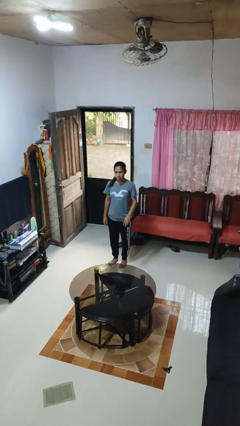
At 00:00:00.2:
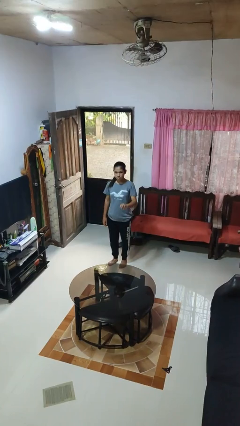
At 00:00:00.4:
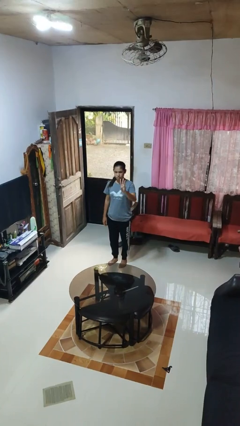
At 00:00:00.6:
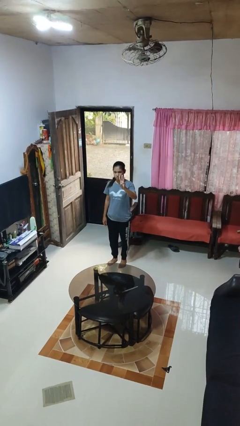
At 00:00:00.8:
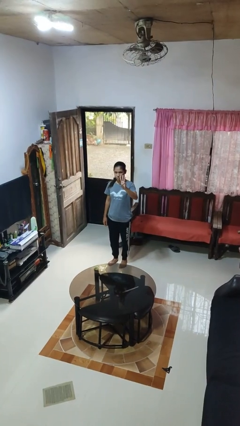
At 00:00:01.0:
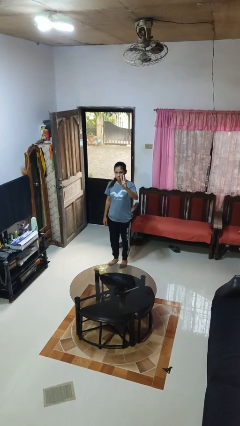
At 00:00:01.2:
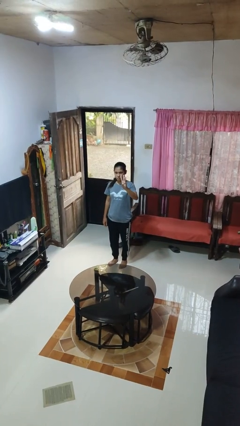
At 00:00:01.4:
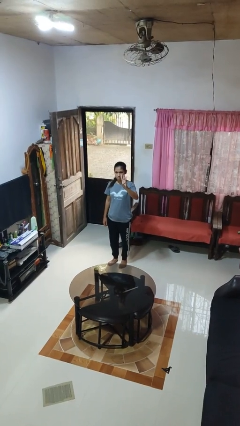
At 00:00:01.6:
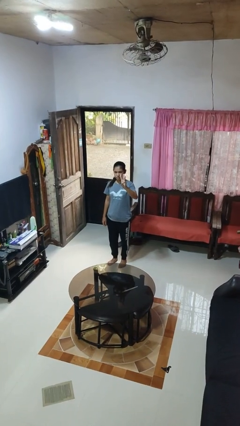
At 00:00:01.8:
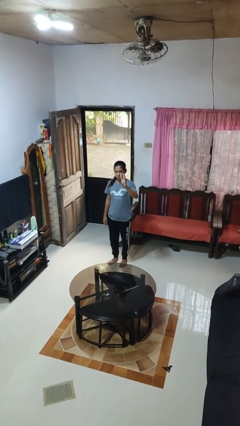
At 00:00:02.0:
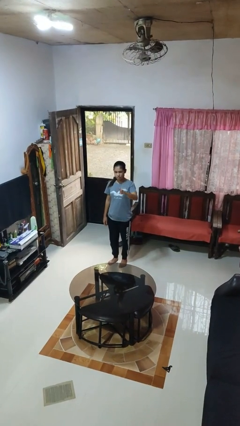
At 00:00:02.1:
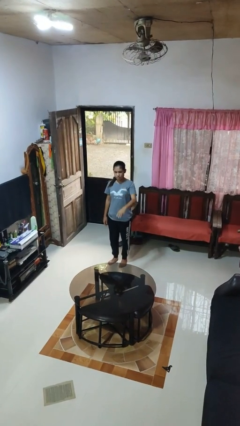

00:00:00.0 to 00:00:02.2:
person gestures number three

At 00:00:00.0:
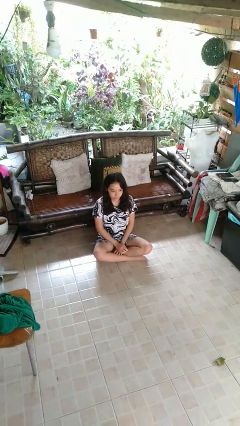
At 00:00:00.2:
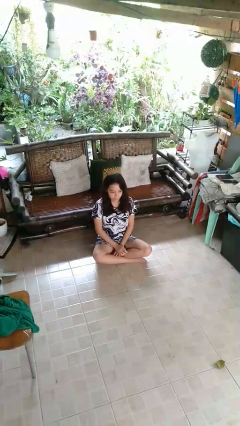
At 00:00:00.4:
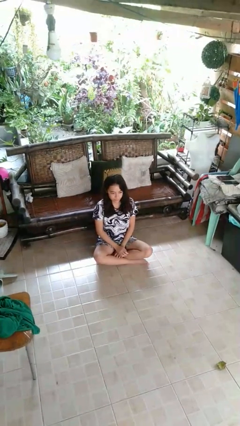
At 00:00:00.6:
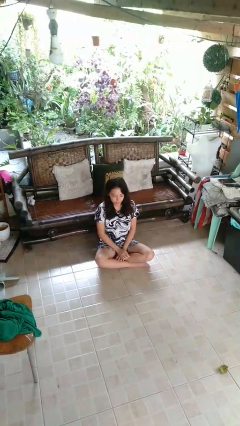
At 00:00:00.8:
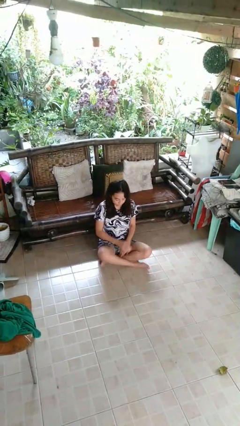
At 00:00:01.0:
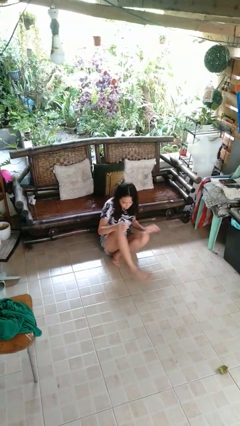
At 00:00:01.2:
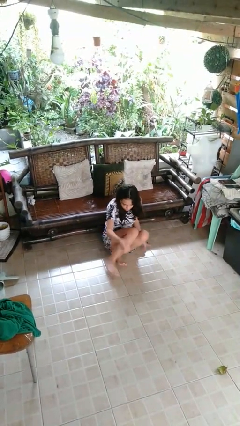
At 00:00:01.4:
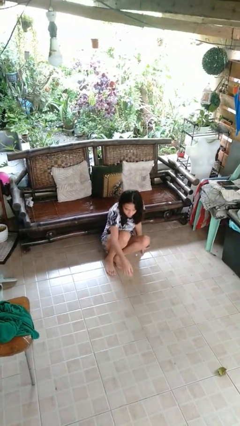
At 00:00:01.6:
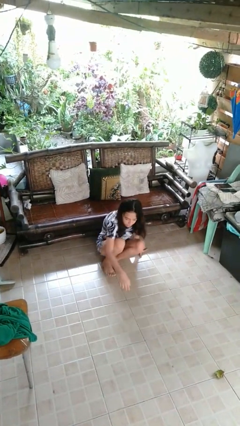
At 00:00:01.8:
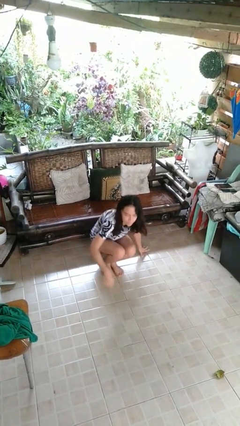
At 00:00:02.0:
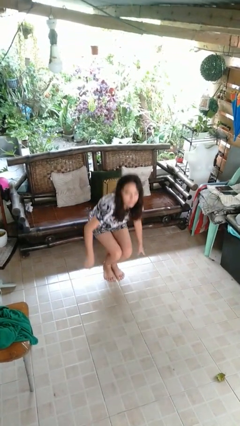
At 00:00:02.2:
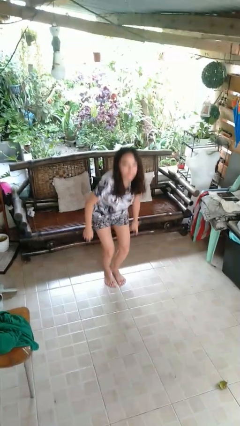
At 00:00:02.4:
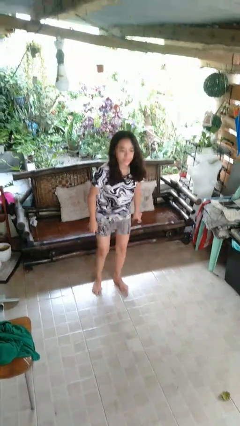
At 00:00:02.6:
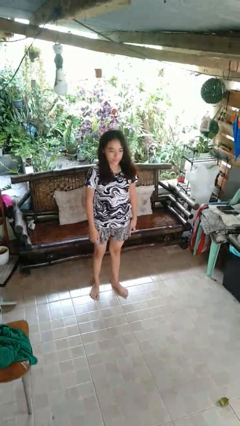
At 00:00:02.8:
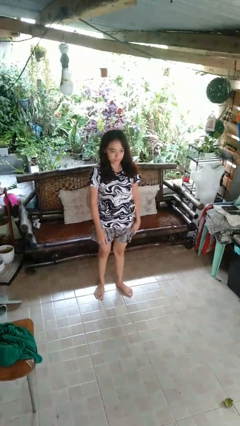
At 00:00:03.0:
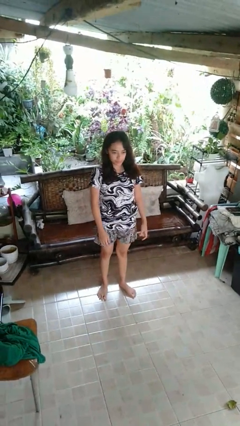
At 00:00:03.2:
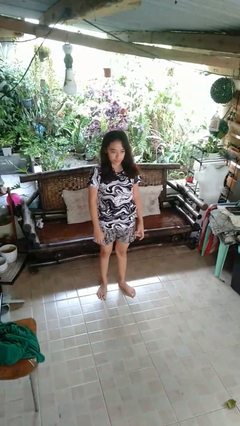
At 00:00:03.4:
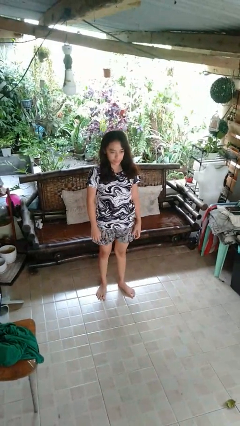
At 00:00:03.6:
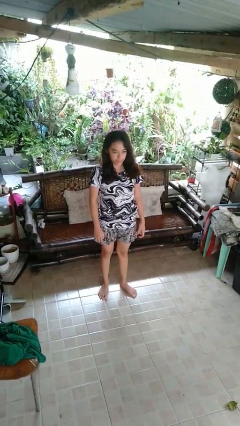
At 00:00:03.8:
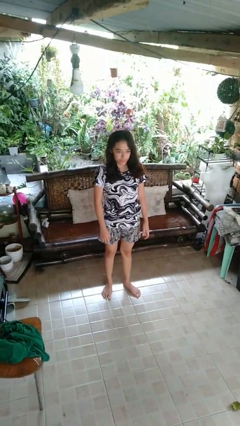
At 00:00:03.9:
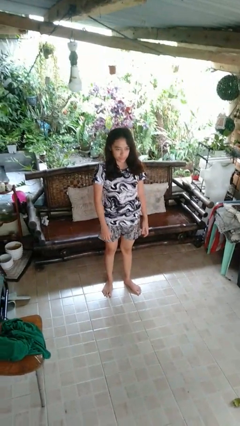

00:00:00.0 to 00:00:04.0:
person stands up from floor

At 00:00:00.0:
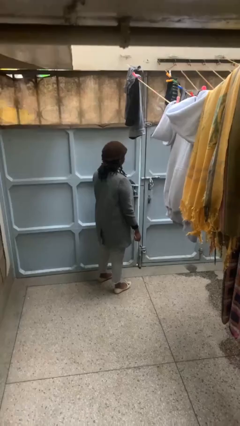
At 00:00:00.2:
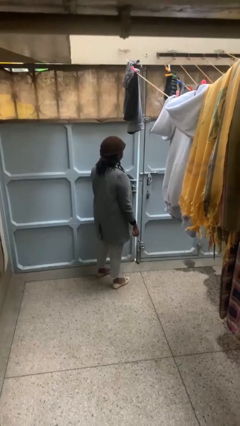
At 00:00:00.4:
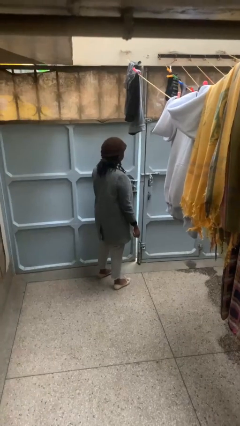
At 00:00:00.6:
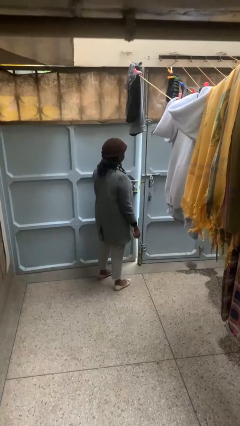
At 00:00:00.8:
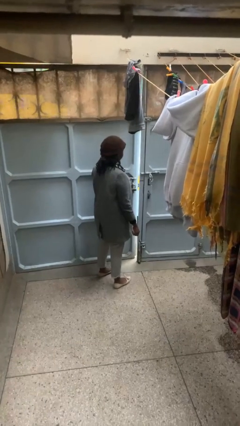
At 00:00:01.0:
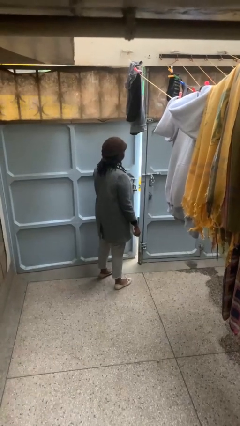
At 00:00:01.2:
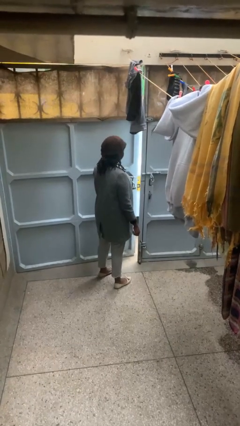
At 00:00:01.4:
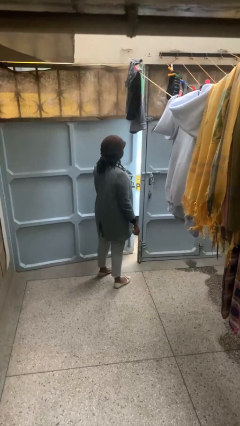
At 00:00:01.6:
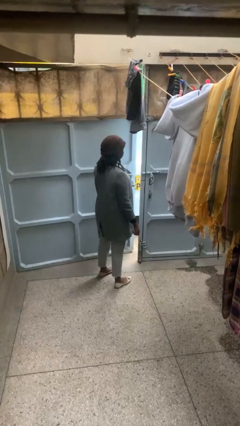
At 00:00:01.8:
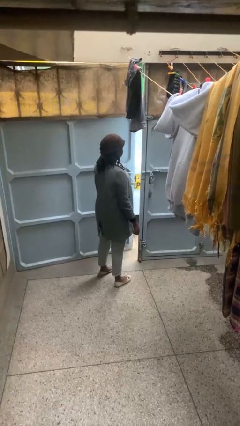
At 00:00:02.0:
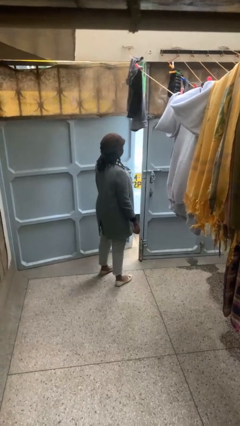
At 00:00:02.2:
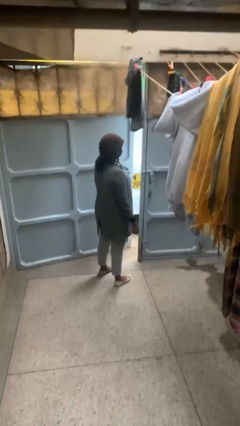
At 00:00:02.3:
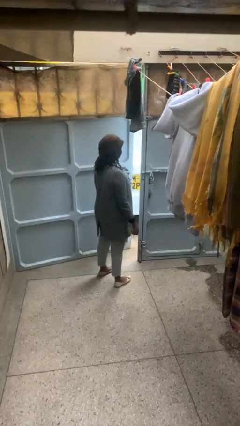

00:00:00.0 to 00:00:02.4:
person opens gate

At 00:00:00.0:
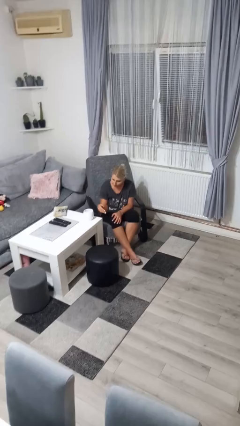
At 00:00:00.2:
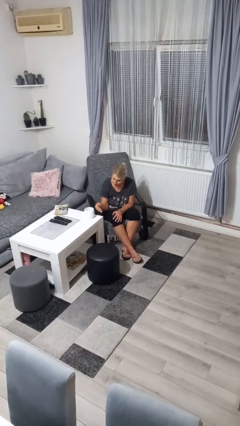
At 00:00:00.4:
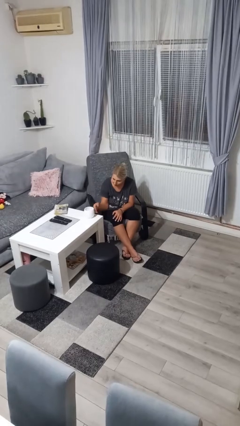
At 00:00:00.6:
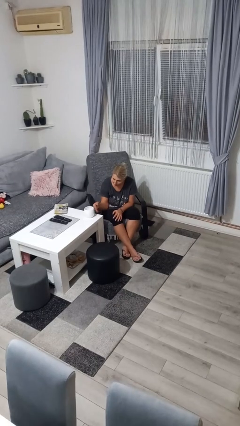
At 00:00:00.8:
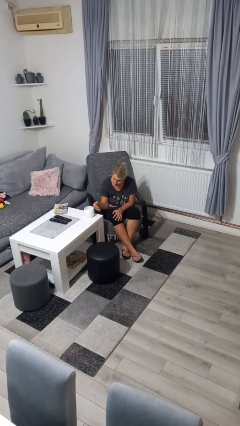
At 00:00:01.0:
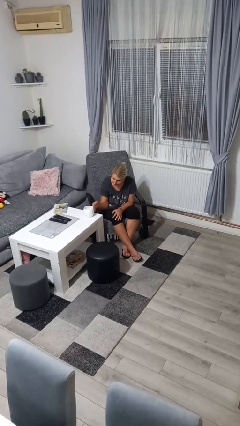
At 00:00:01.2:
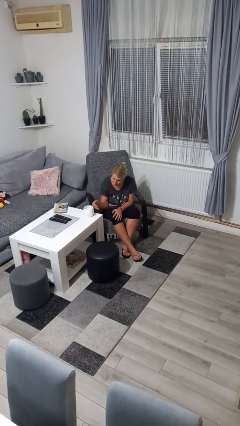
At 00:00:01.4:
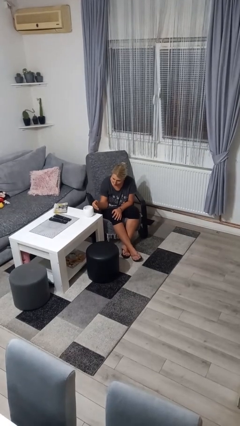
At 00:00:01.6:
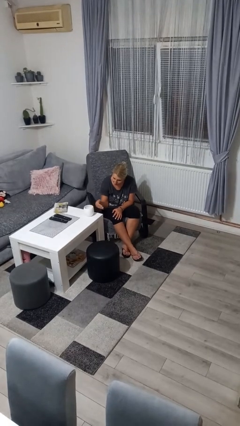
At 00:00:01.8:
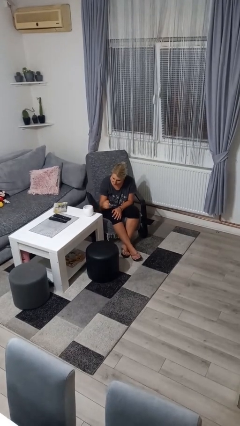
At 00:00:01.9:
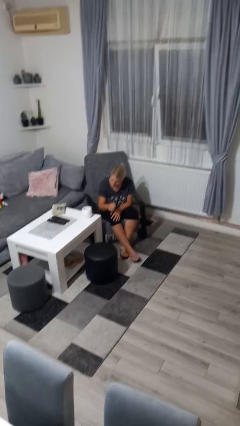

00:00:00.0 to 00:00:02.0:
person taps object with finger

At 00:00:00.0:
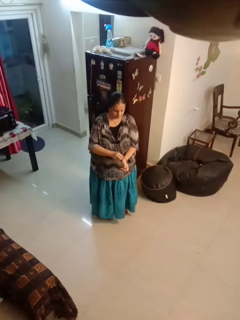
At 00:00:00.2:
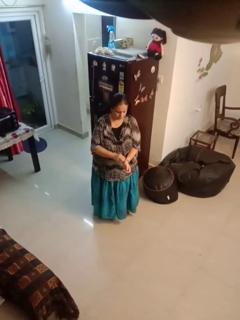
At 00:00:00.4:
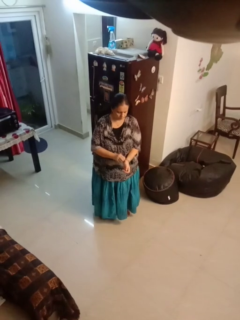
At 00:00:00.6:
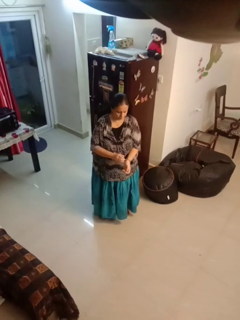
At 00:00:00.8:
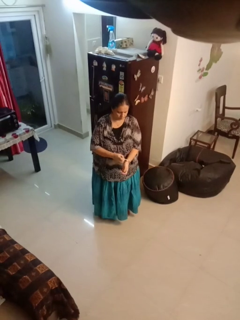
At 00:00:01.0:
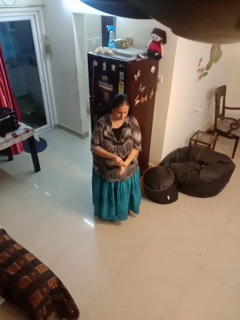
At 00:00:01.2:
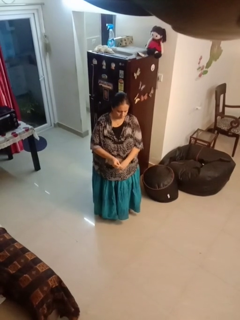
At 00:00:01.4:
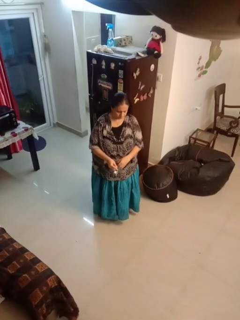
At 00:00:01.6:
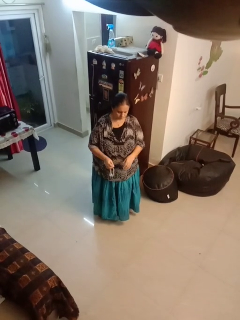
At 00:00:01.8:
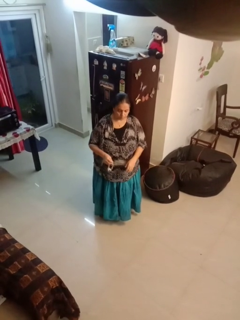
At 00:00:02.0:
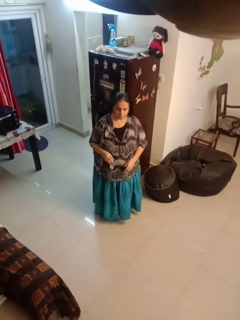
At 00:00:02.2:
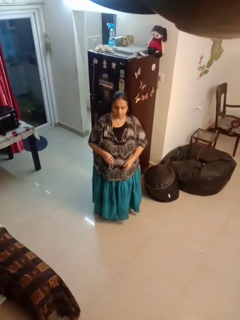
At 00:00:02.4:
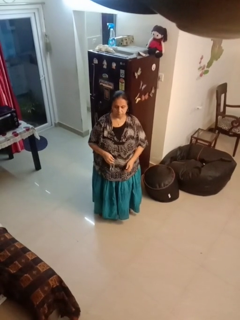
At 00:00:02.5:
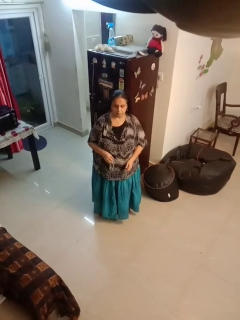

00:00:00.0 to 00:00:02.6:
person takes off wristwatch

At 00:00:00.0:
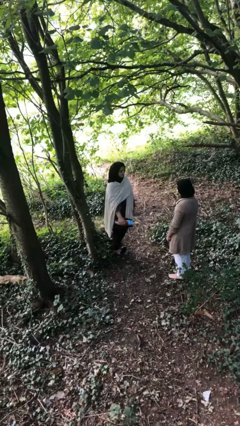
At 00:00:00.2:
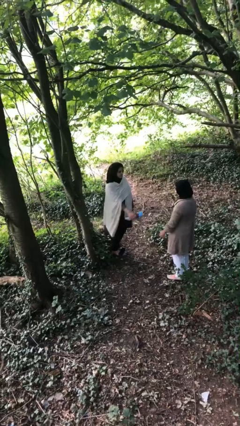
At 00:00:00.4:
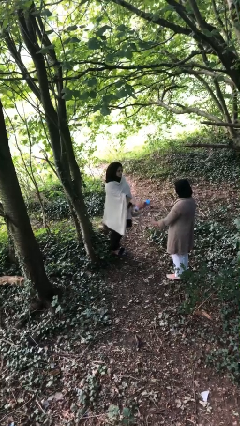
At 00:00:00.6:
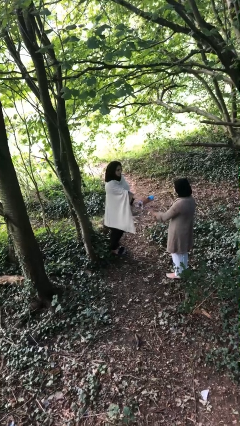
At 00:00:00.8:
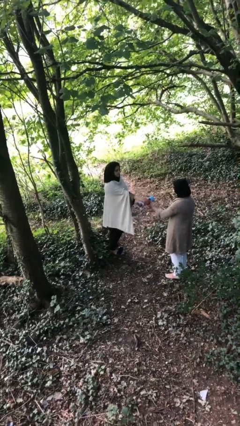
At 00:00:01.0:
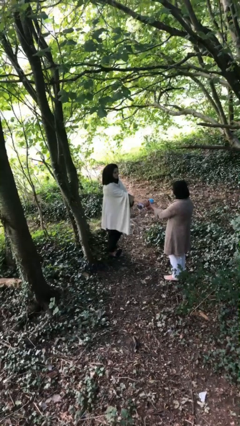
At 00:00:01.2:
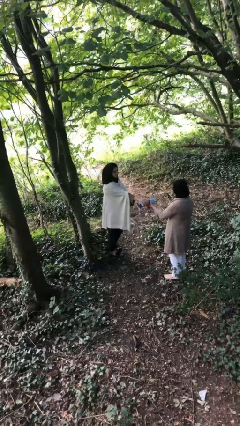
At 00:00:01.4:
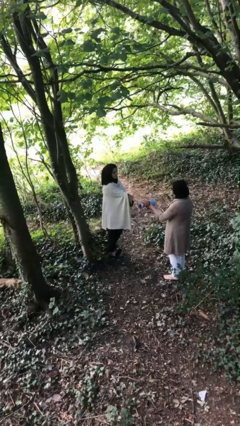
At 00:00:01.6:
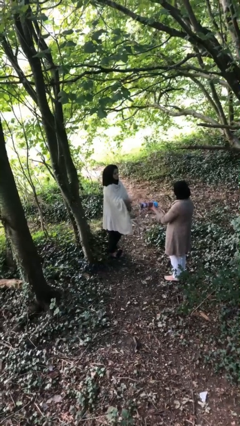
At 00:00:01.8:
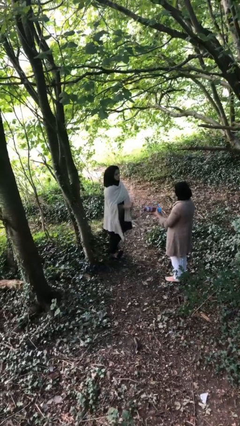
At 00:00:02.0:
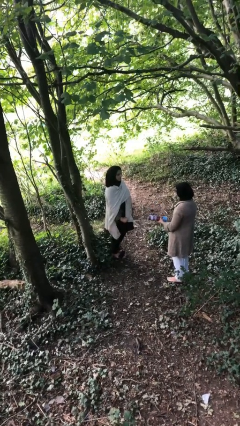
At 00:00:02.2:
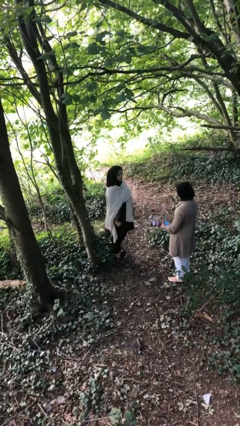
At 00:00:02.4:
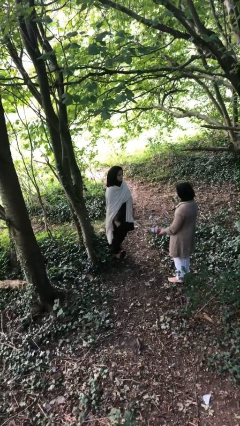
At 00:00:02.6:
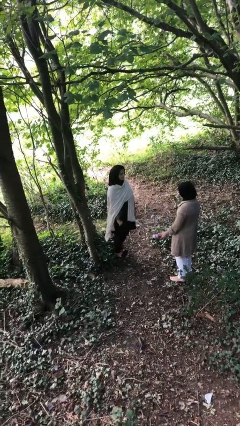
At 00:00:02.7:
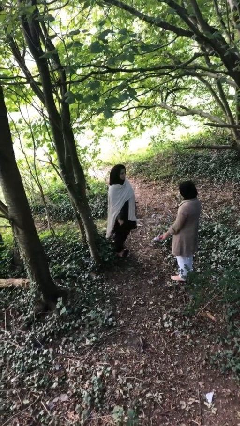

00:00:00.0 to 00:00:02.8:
person transfers object to person

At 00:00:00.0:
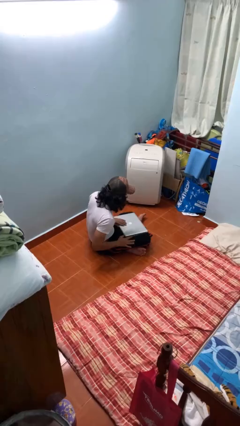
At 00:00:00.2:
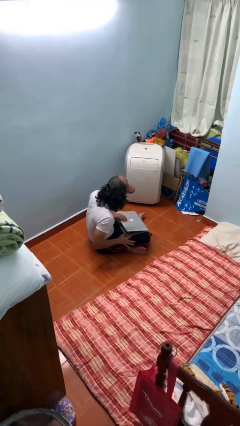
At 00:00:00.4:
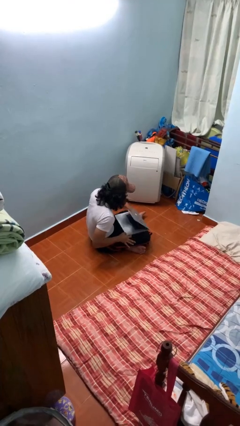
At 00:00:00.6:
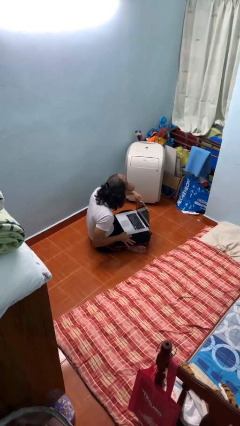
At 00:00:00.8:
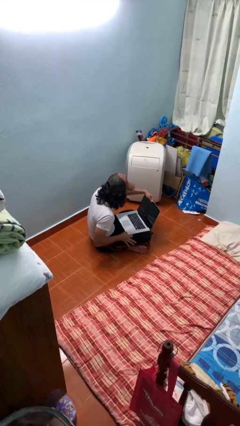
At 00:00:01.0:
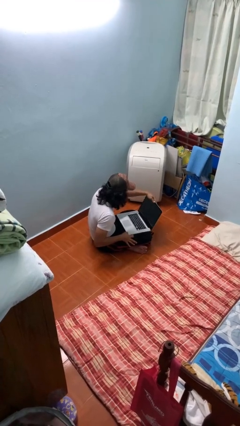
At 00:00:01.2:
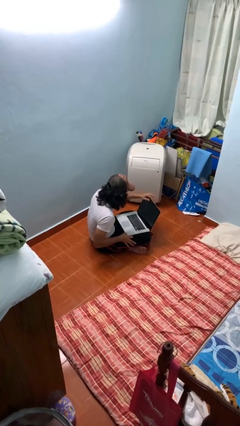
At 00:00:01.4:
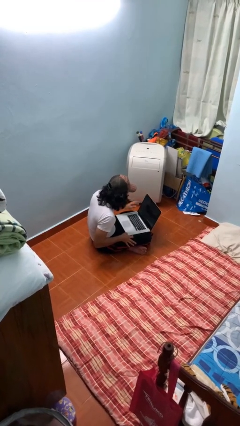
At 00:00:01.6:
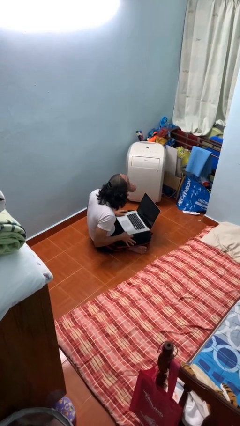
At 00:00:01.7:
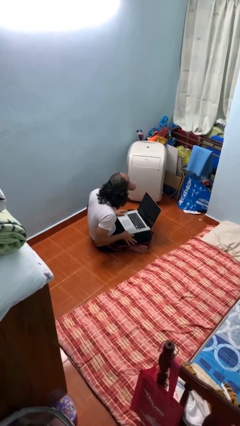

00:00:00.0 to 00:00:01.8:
person opens laptop
